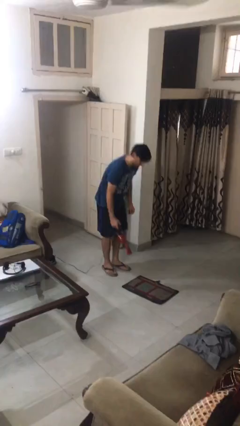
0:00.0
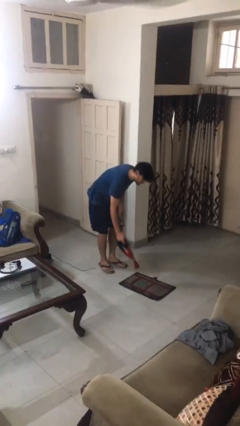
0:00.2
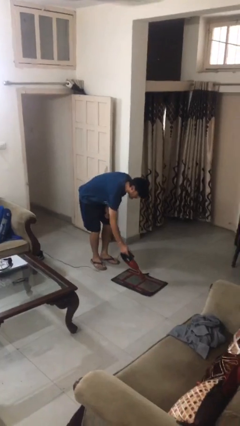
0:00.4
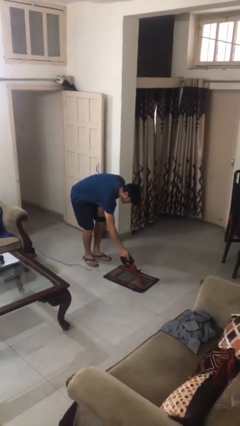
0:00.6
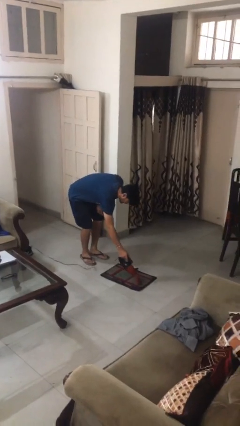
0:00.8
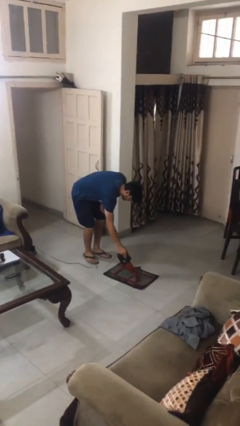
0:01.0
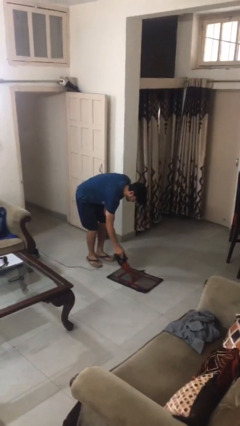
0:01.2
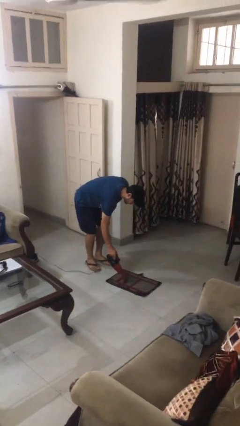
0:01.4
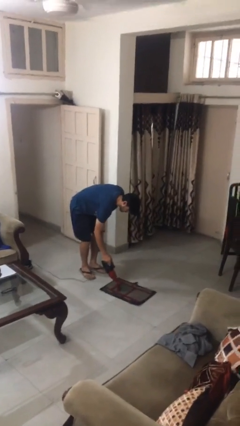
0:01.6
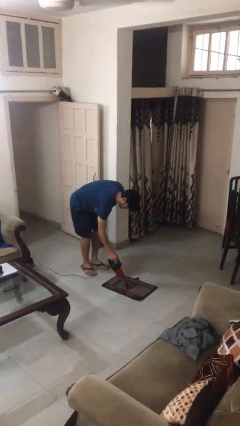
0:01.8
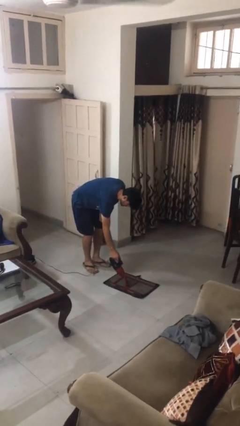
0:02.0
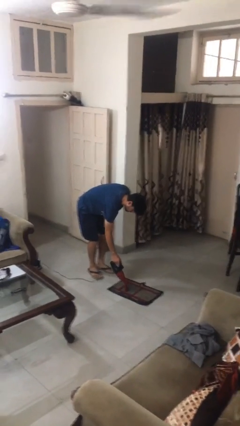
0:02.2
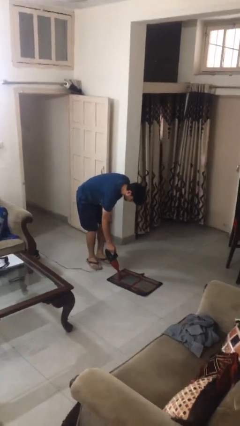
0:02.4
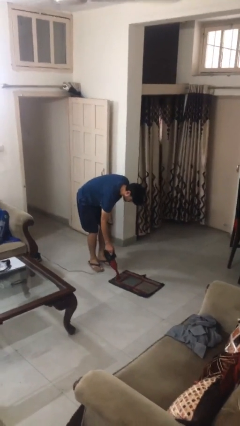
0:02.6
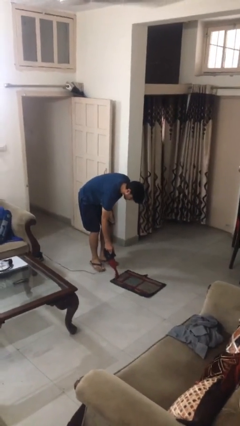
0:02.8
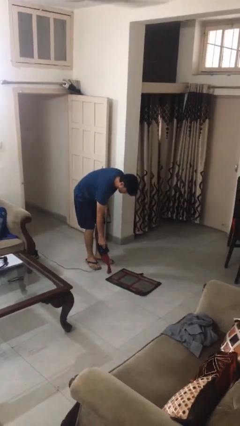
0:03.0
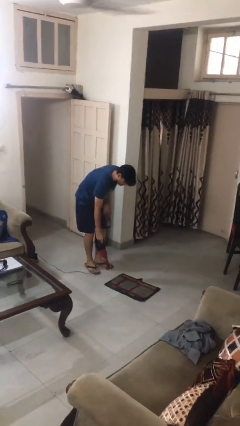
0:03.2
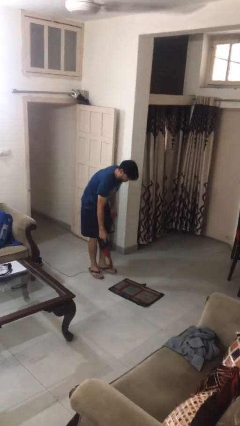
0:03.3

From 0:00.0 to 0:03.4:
person vacuums carpet

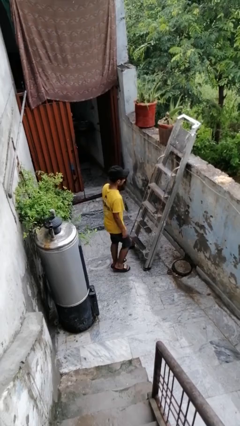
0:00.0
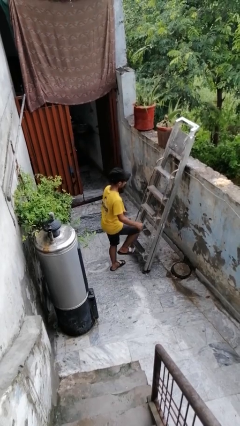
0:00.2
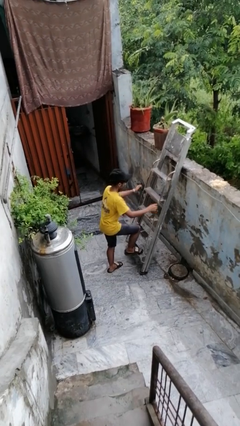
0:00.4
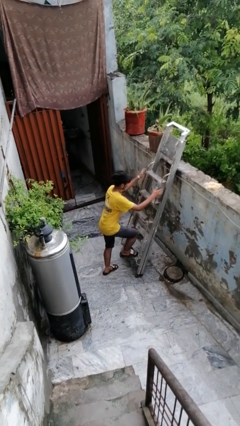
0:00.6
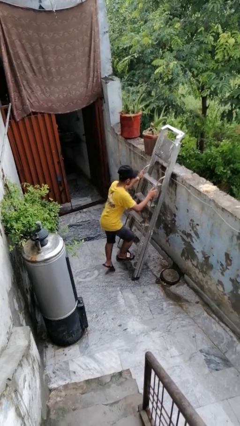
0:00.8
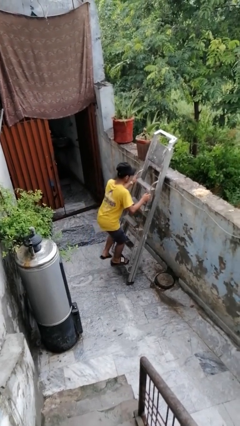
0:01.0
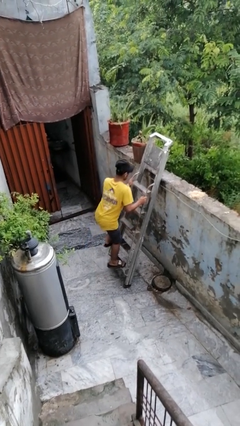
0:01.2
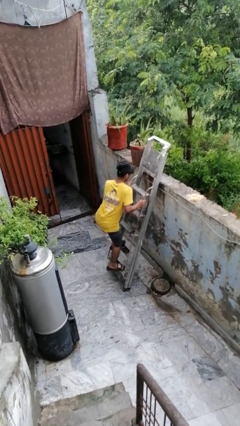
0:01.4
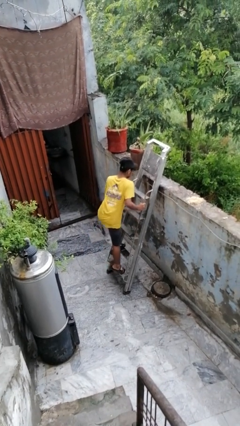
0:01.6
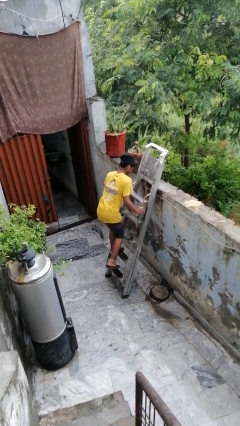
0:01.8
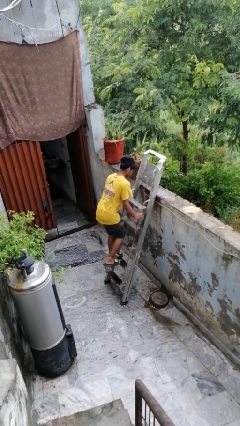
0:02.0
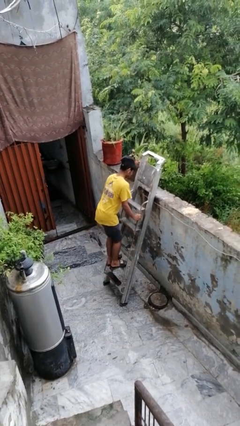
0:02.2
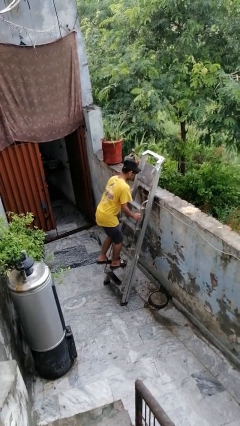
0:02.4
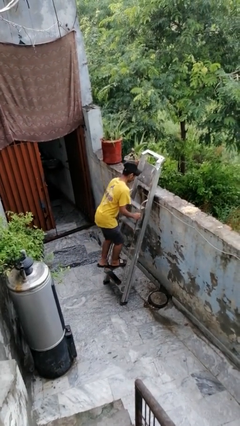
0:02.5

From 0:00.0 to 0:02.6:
person climbs up ladder

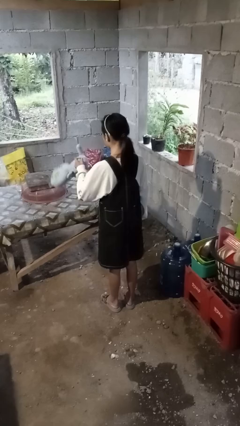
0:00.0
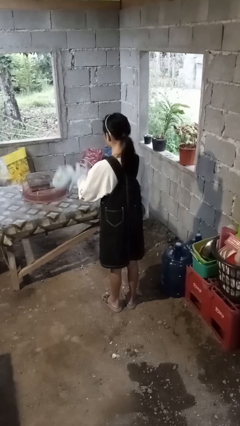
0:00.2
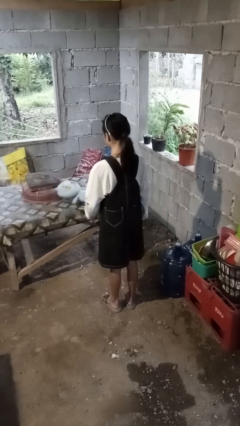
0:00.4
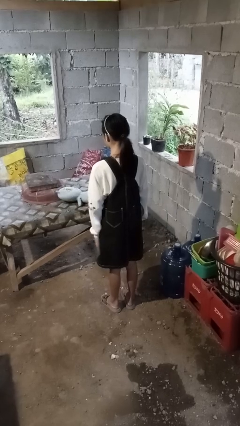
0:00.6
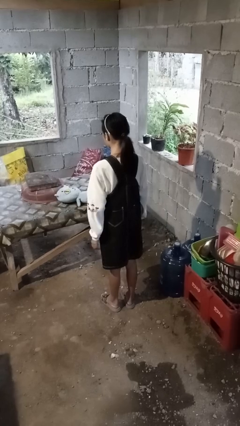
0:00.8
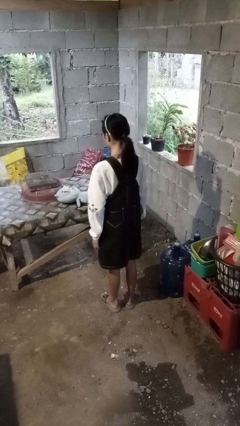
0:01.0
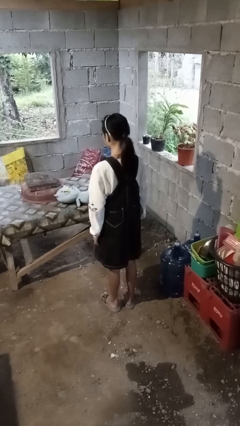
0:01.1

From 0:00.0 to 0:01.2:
person throws object on table

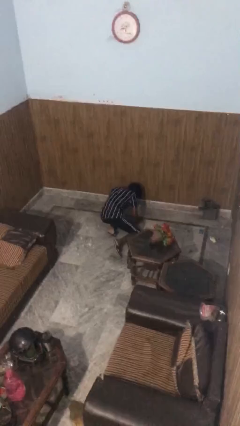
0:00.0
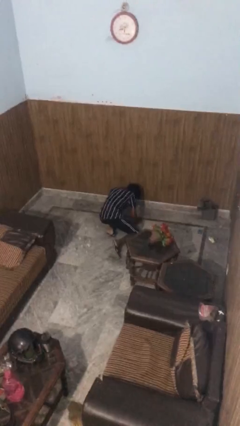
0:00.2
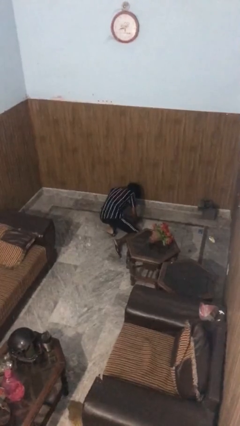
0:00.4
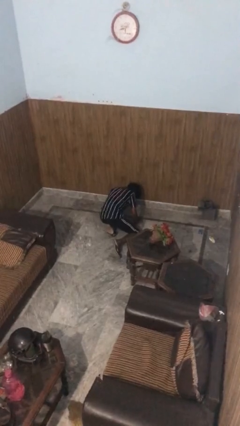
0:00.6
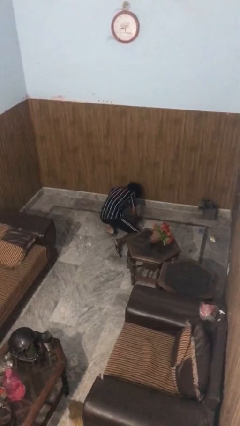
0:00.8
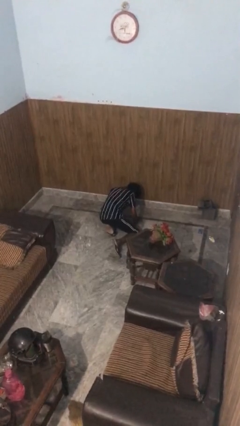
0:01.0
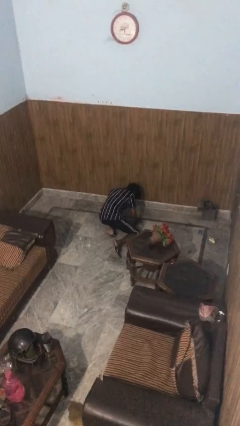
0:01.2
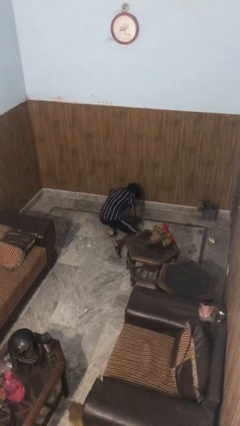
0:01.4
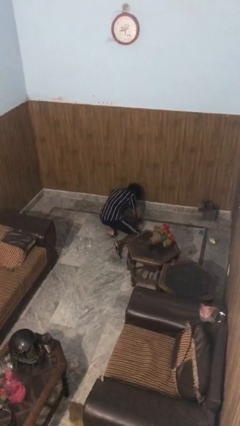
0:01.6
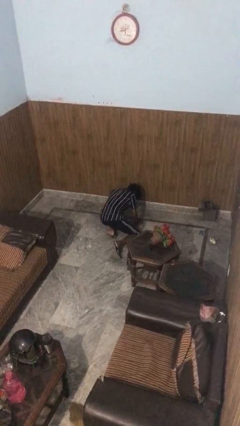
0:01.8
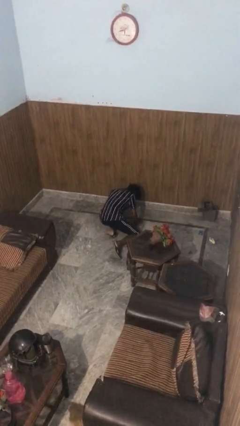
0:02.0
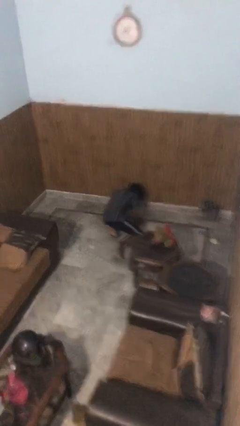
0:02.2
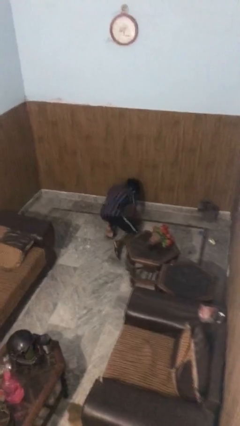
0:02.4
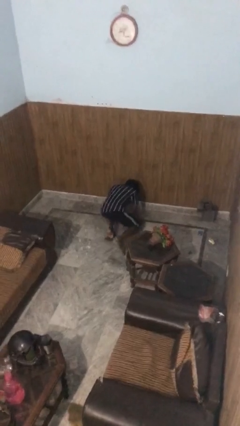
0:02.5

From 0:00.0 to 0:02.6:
person lies down on floor

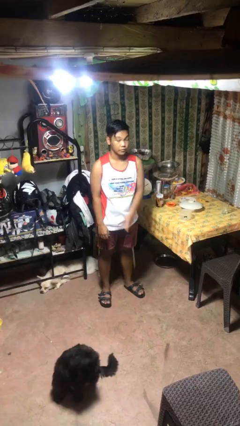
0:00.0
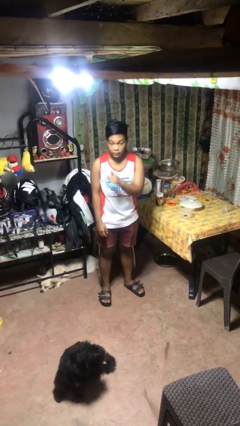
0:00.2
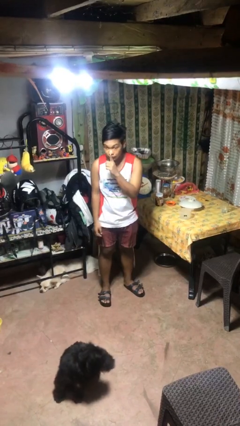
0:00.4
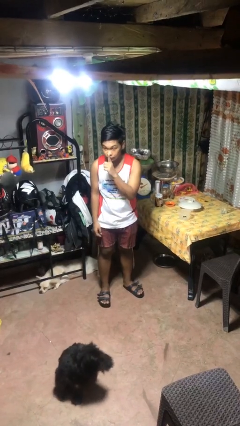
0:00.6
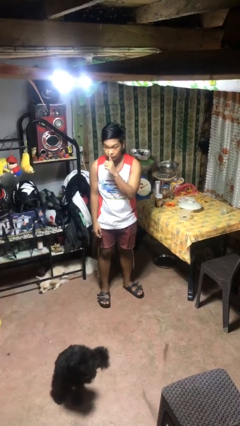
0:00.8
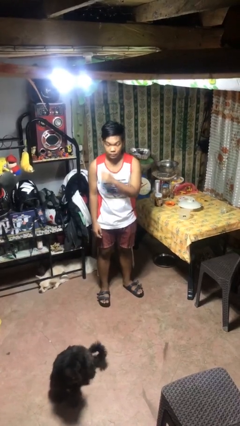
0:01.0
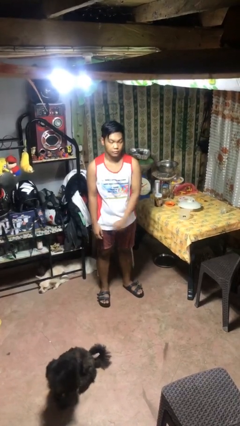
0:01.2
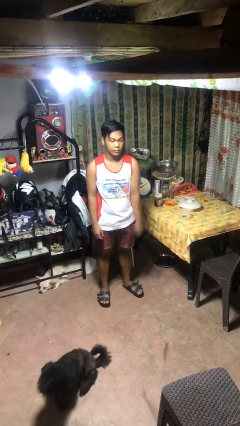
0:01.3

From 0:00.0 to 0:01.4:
person gestures be quiet

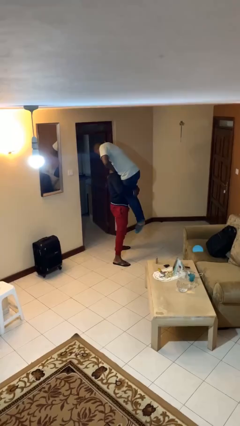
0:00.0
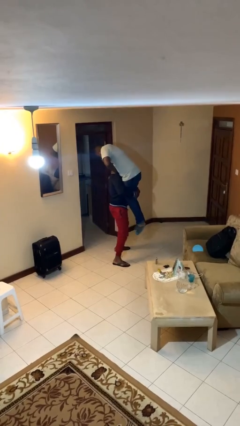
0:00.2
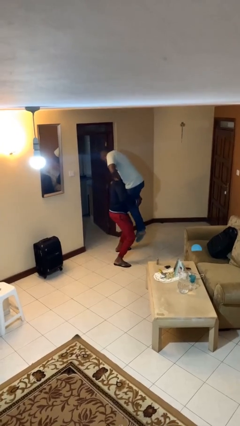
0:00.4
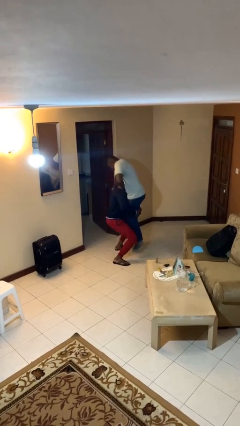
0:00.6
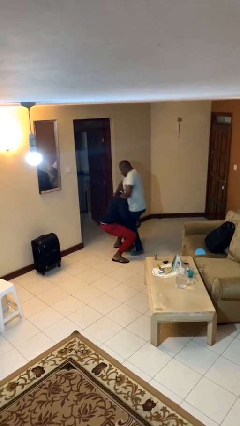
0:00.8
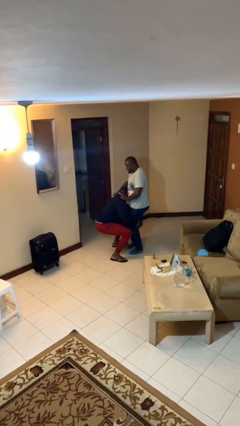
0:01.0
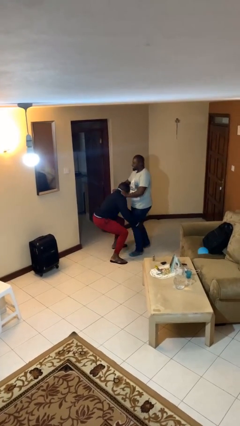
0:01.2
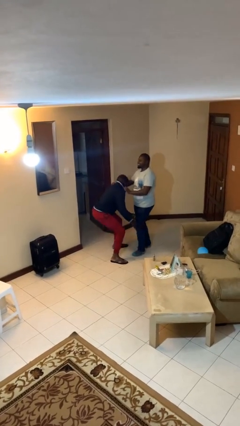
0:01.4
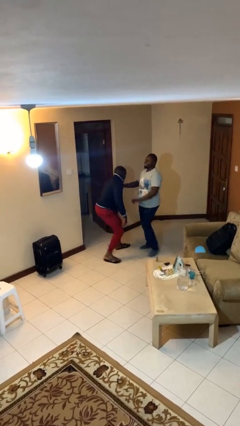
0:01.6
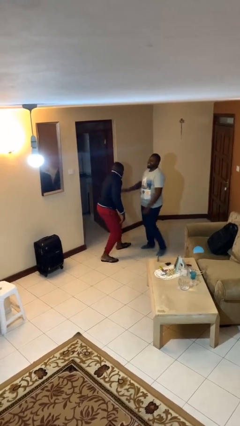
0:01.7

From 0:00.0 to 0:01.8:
person puts down person

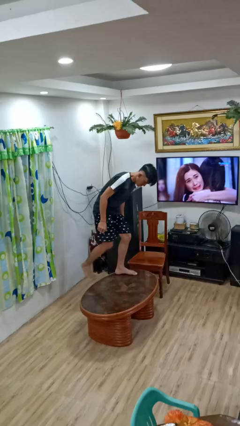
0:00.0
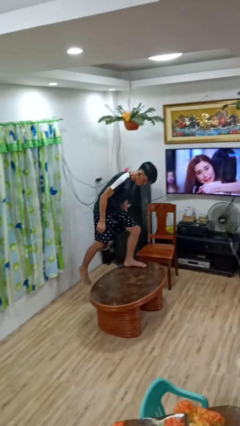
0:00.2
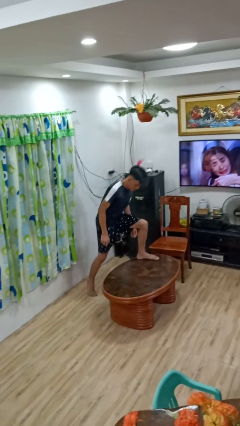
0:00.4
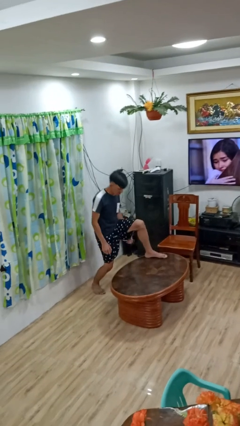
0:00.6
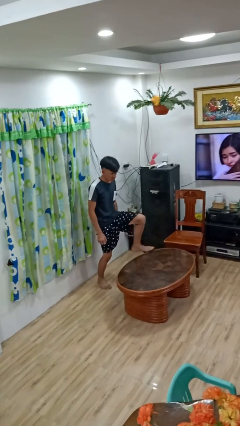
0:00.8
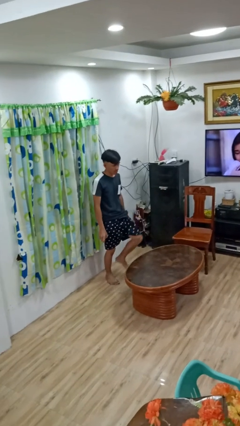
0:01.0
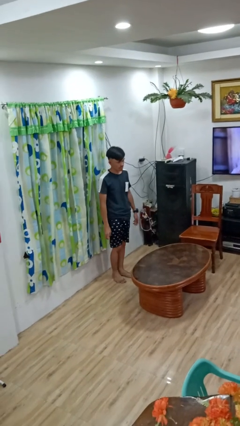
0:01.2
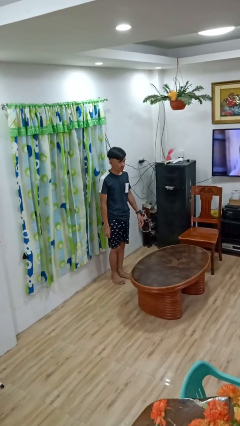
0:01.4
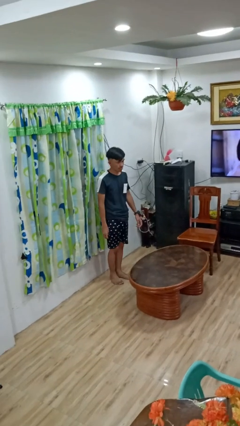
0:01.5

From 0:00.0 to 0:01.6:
person climbs off table

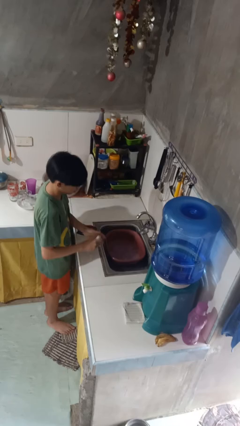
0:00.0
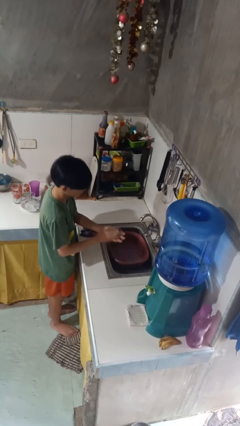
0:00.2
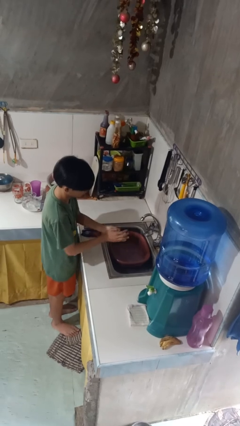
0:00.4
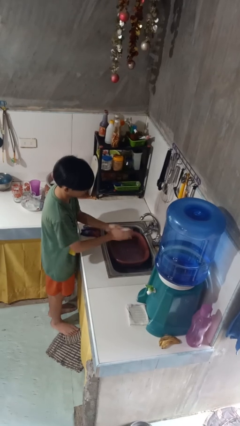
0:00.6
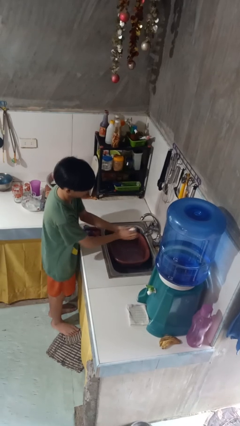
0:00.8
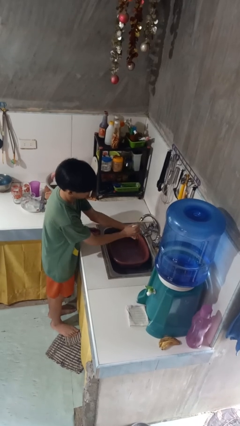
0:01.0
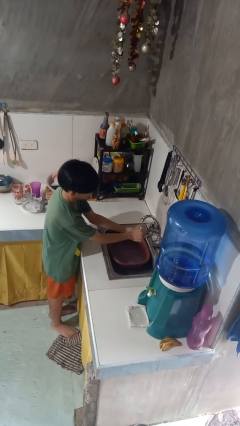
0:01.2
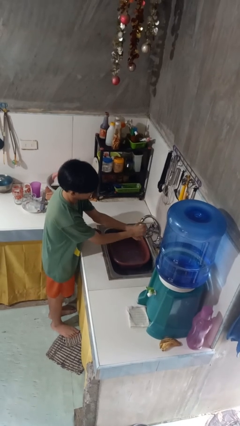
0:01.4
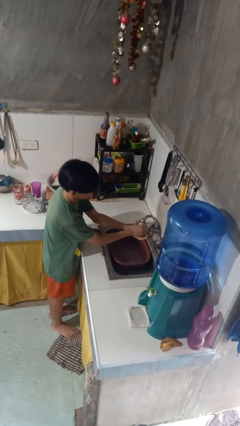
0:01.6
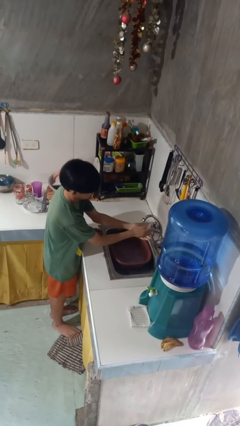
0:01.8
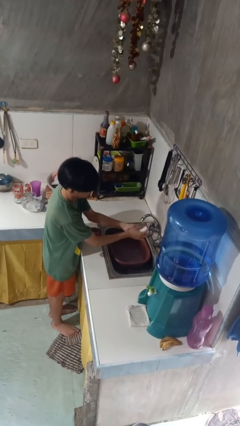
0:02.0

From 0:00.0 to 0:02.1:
person washes hands

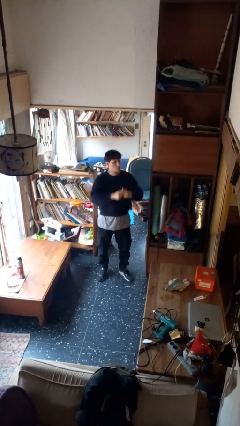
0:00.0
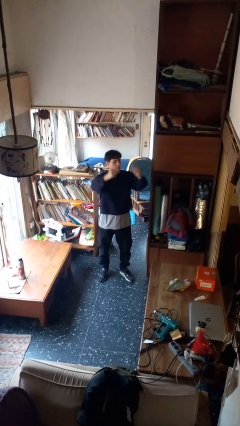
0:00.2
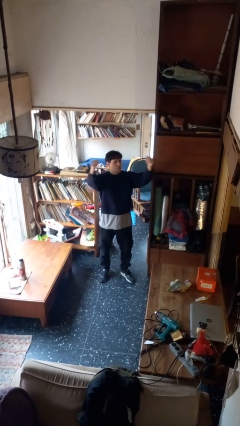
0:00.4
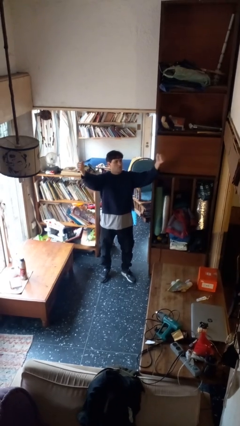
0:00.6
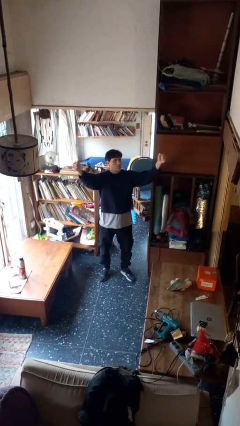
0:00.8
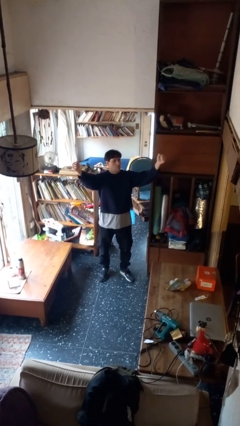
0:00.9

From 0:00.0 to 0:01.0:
person gestures zoom in
